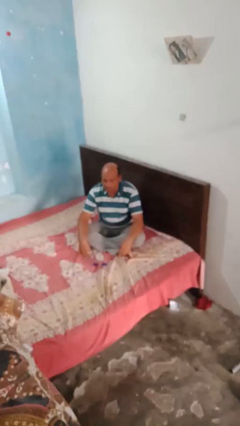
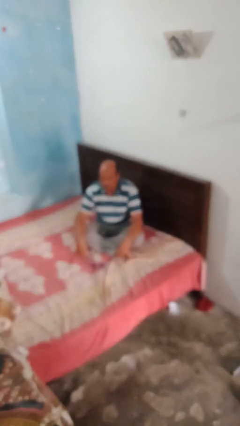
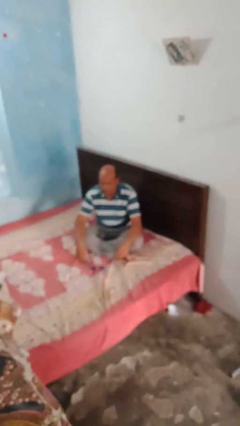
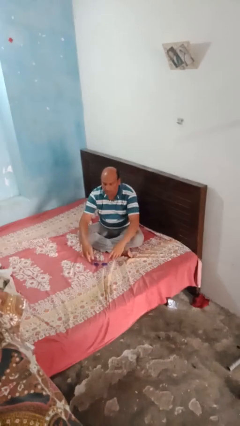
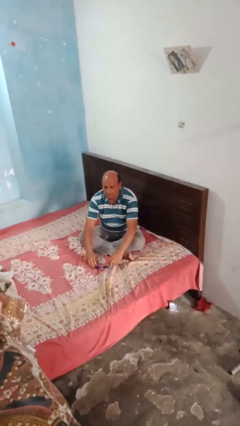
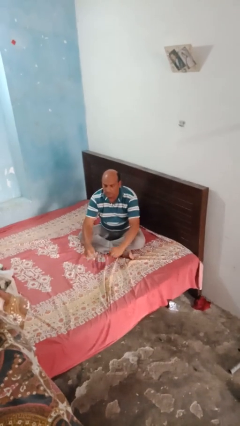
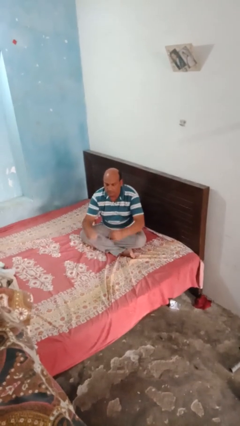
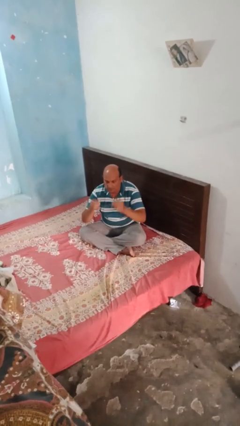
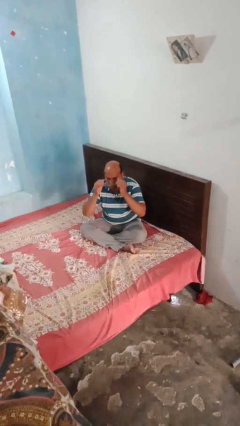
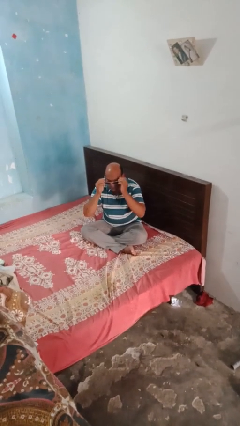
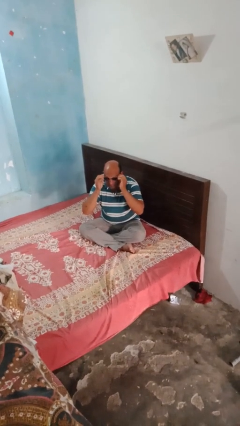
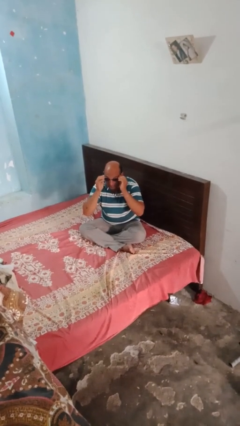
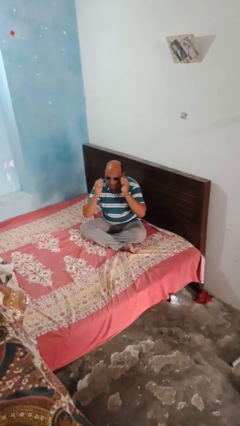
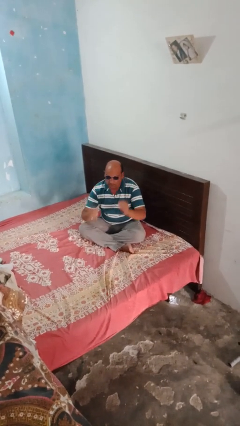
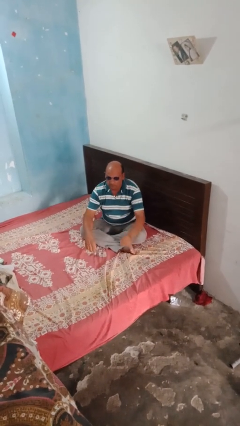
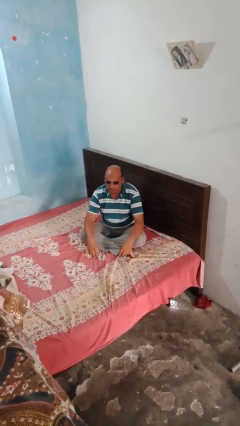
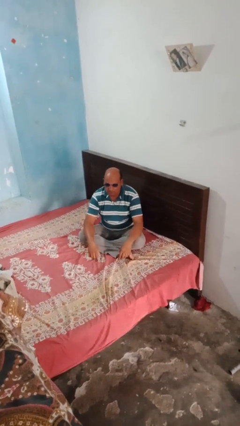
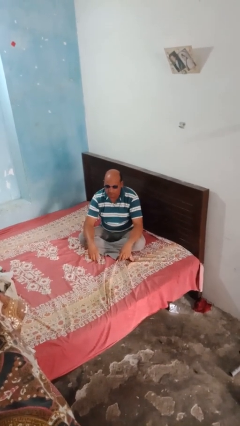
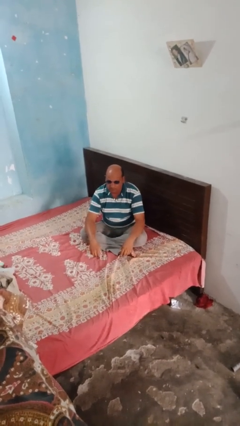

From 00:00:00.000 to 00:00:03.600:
person puts on sunglasses

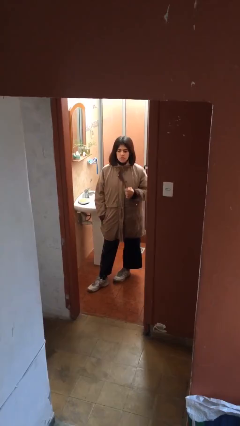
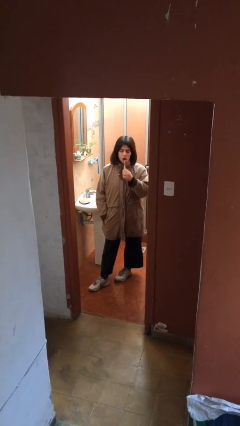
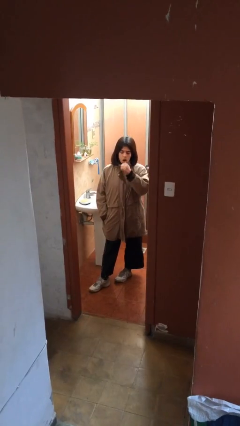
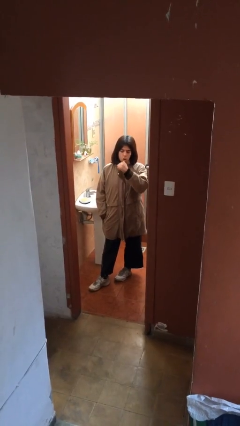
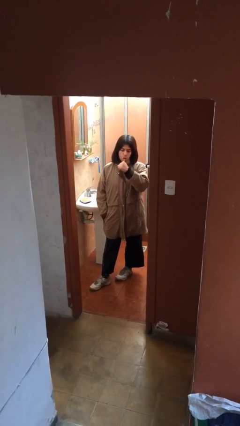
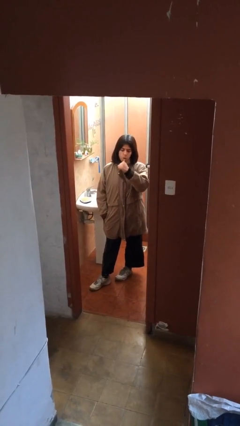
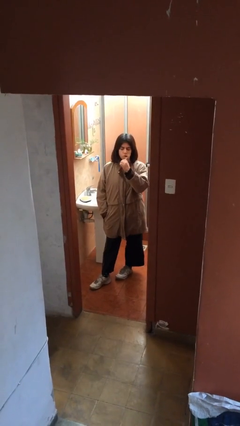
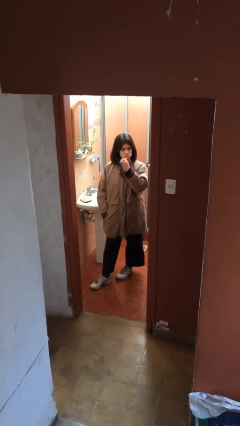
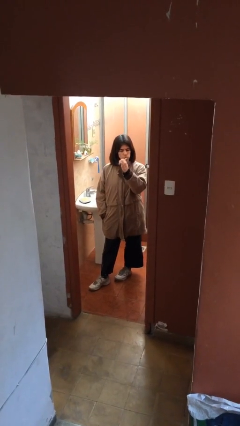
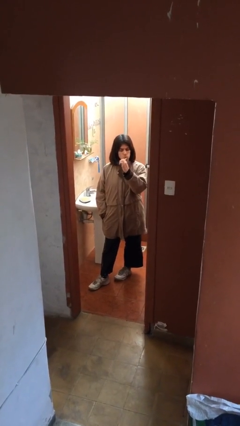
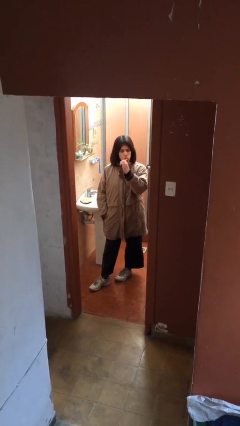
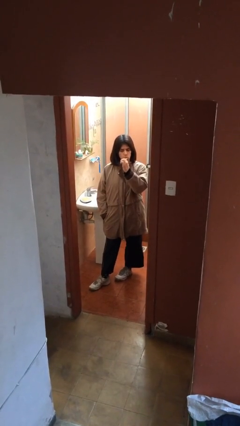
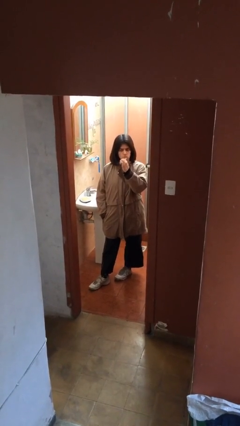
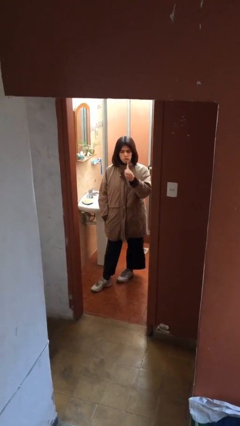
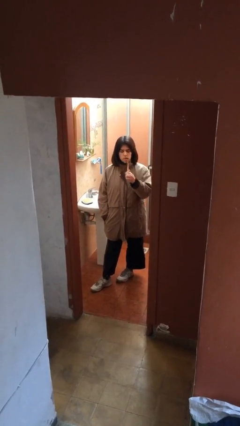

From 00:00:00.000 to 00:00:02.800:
person brushes teeth

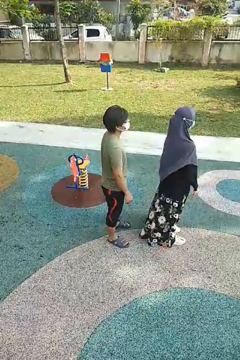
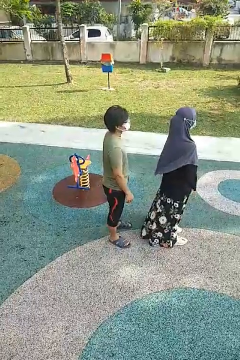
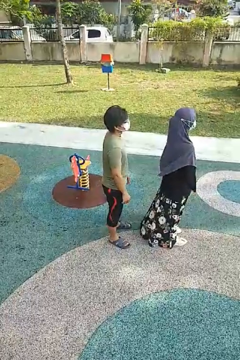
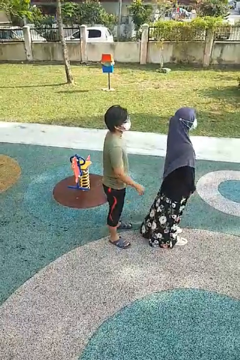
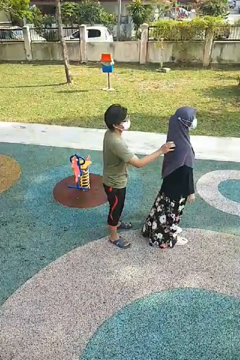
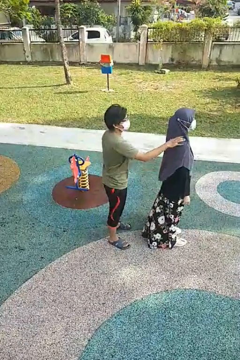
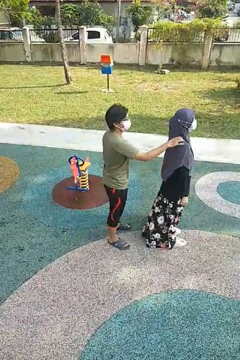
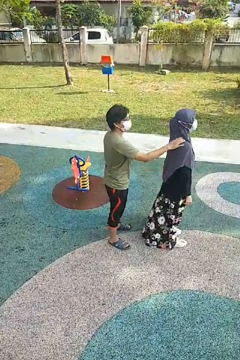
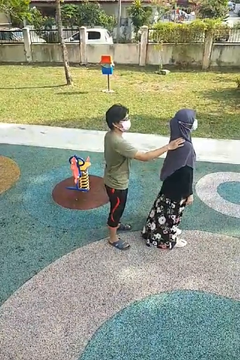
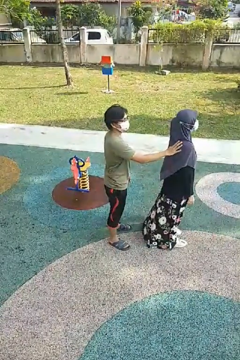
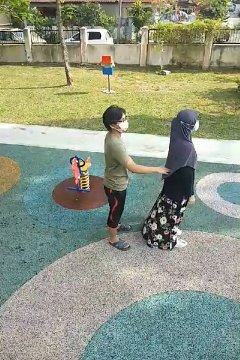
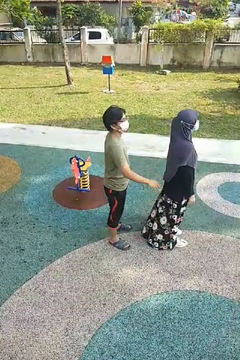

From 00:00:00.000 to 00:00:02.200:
person touches back of person

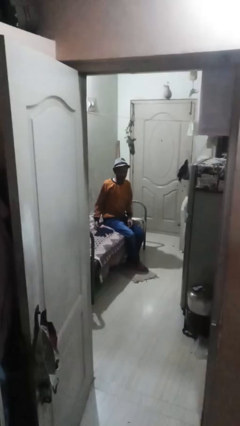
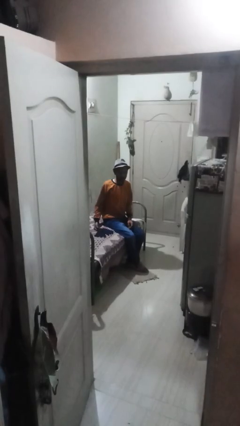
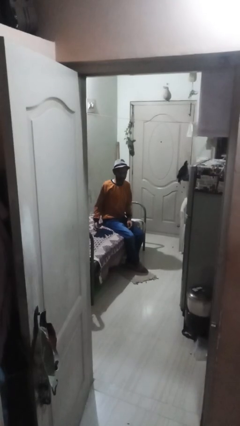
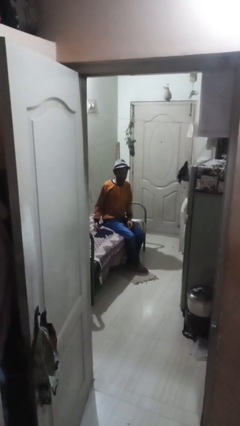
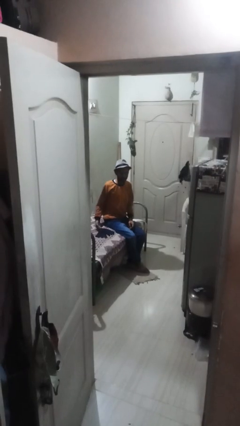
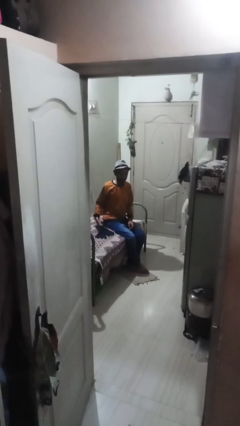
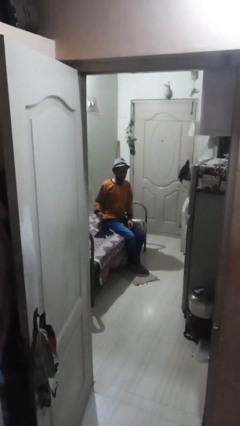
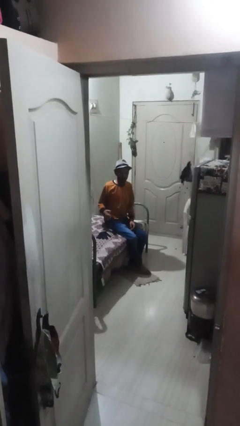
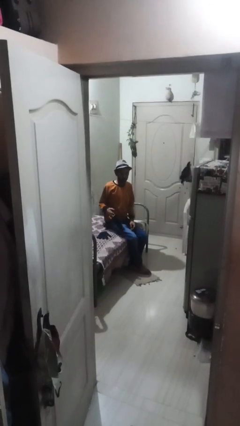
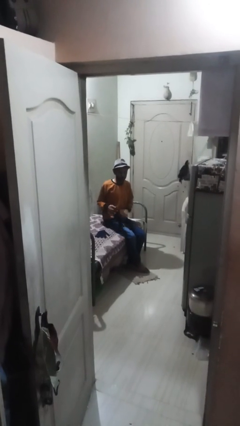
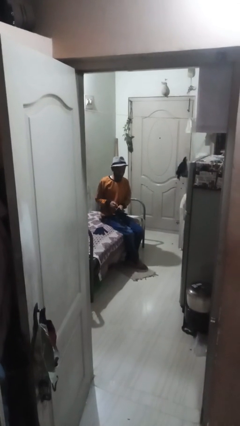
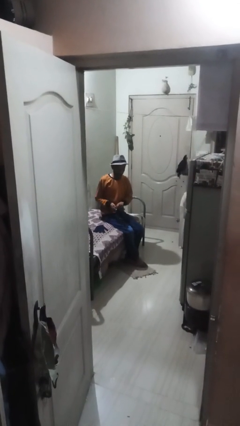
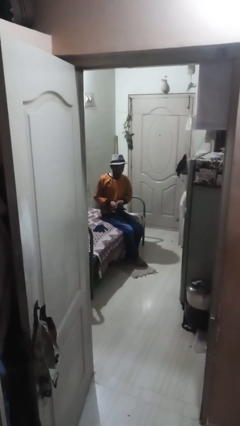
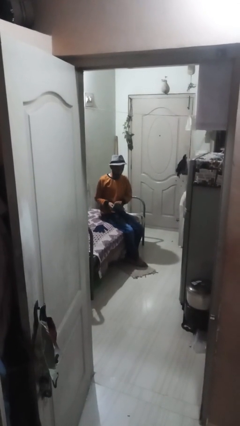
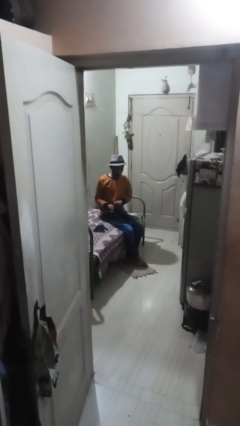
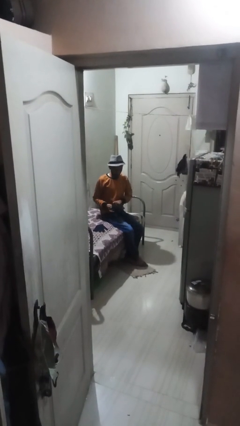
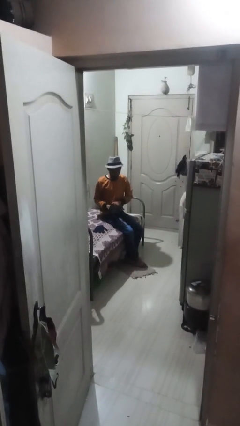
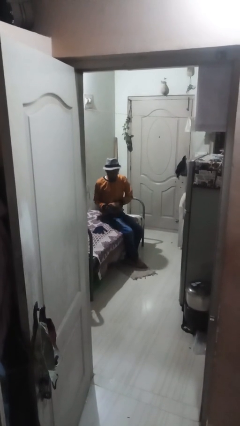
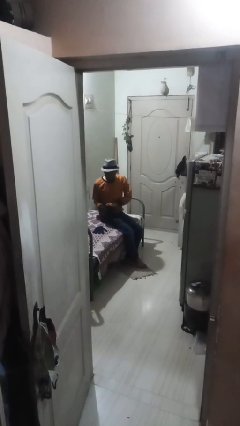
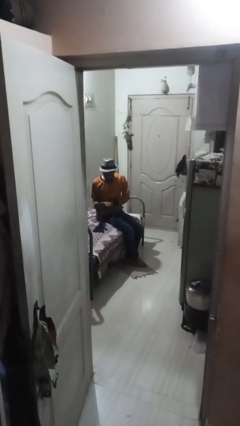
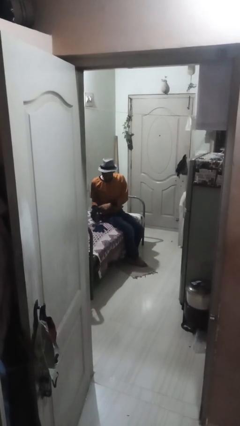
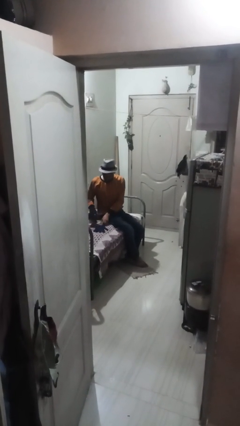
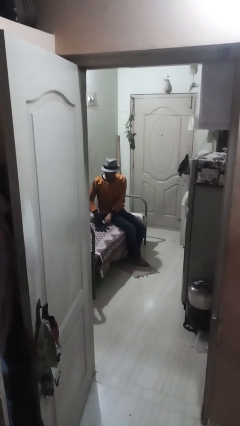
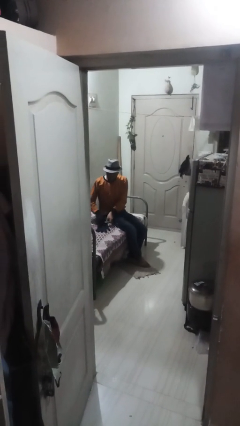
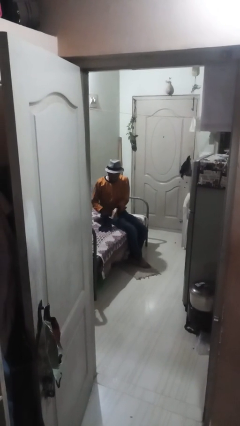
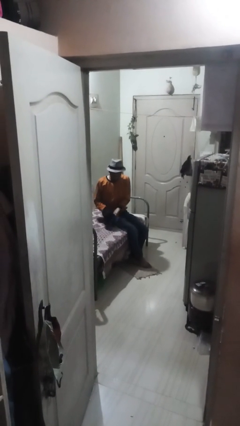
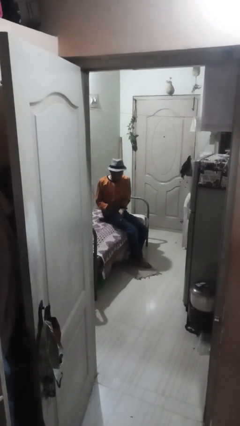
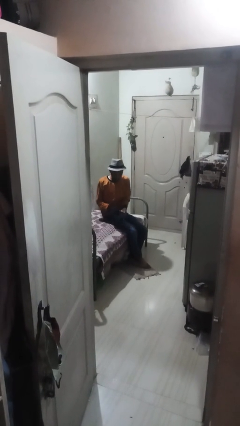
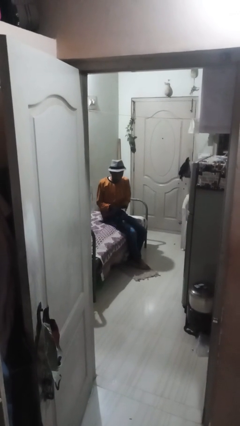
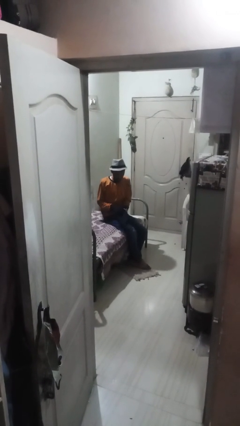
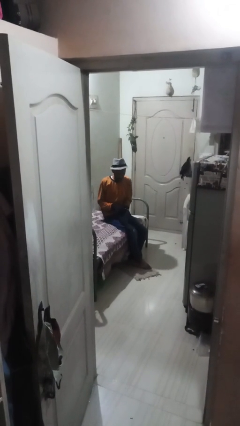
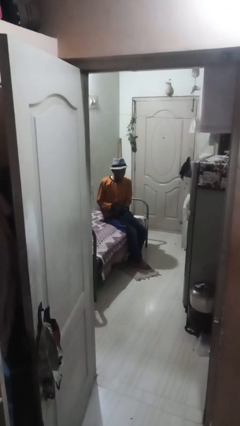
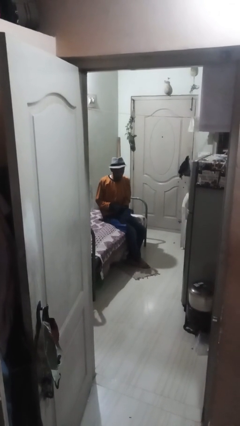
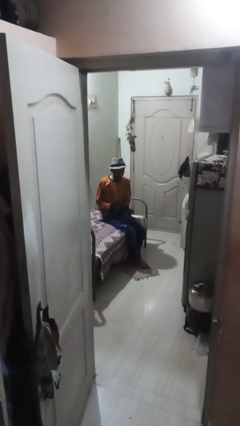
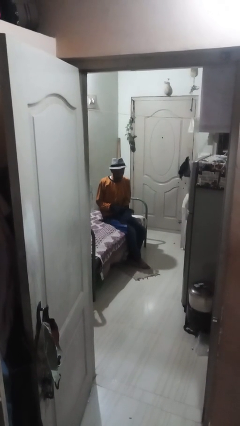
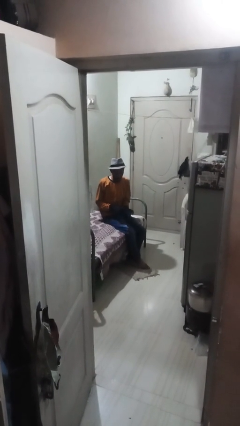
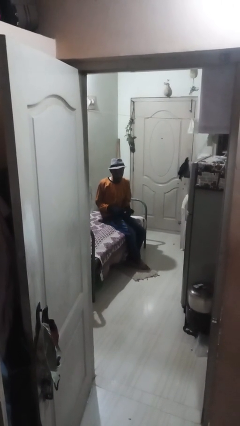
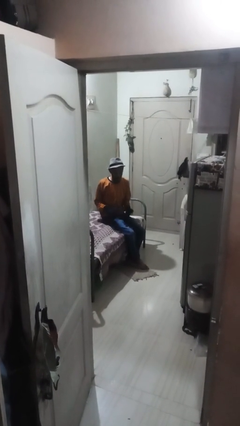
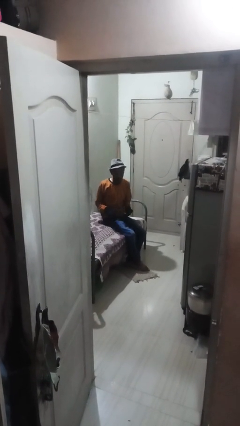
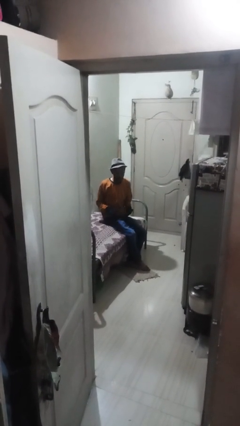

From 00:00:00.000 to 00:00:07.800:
person puts on gloves

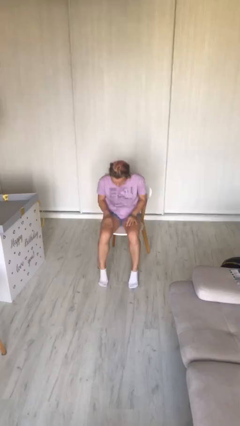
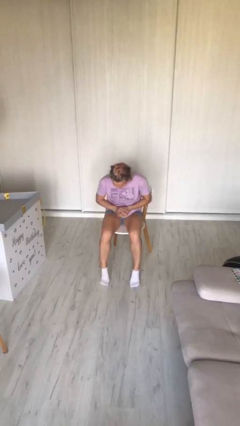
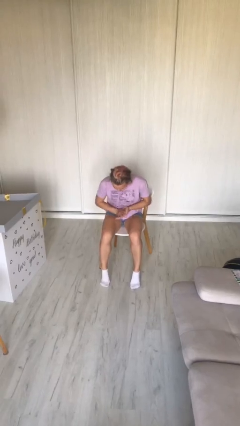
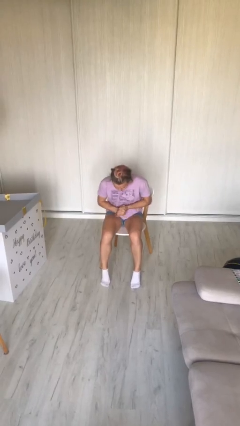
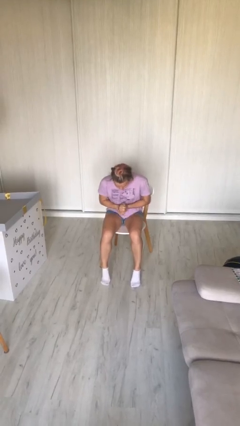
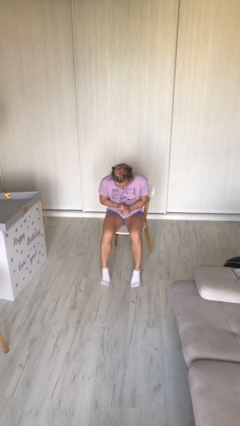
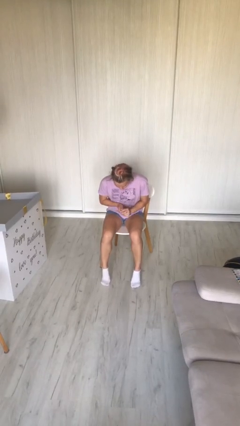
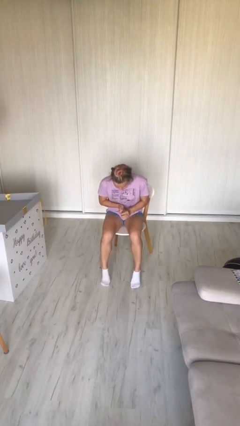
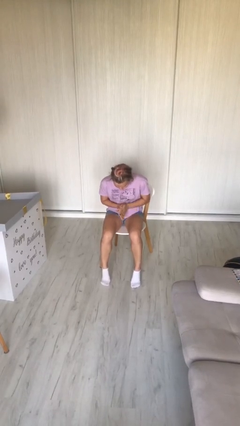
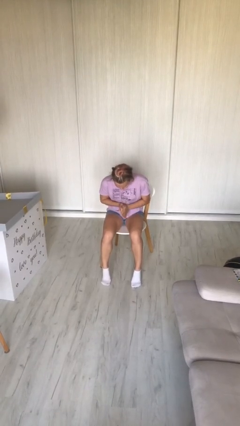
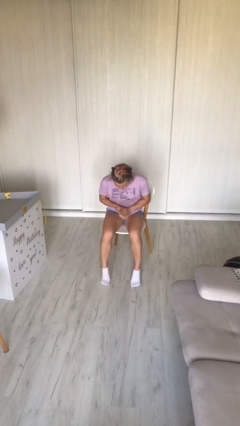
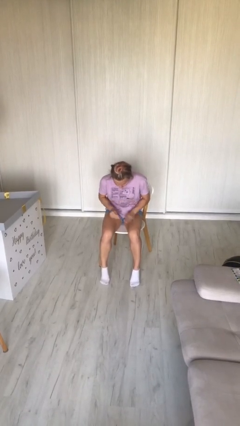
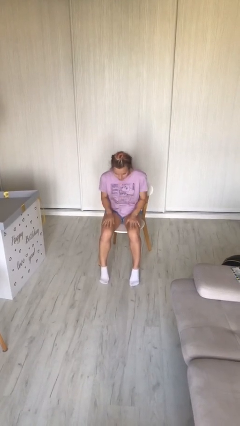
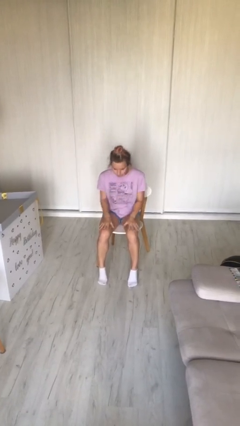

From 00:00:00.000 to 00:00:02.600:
person looks at hands in lap
